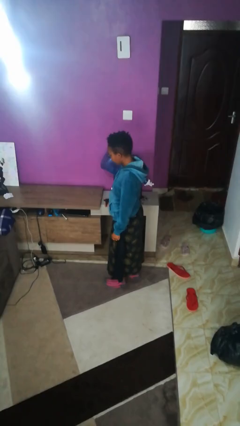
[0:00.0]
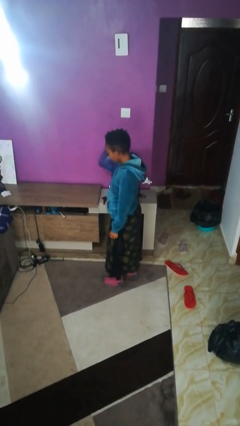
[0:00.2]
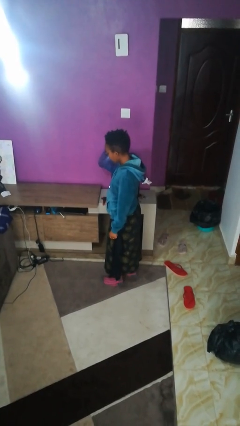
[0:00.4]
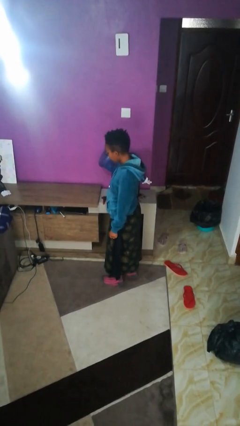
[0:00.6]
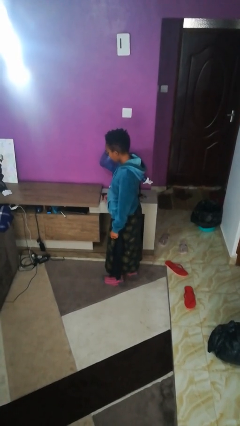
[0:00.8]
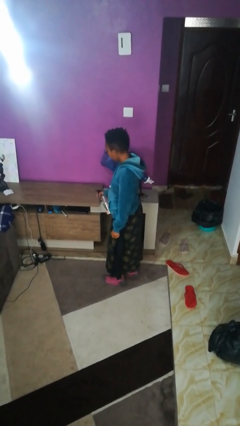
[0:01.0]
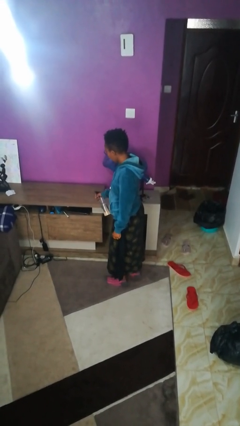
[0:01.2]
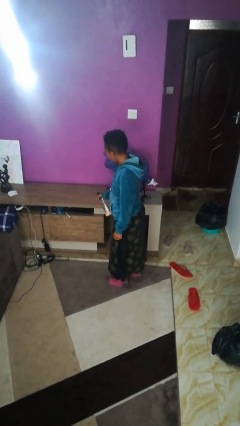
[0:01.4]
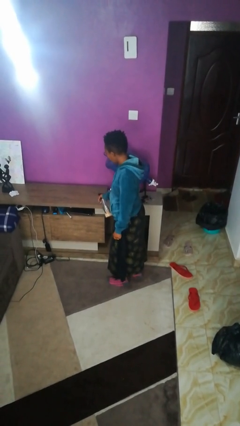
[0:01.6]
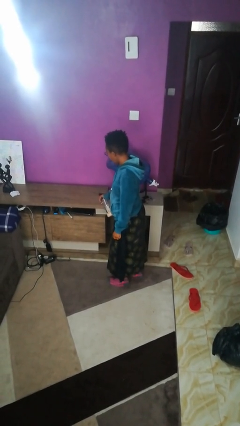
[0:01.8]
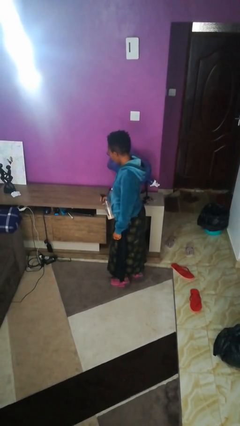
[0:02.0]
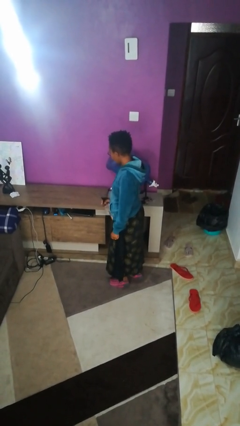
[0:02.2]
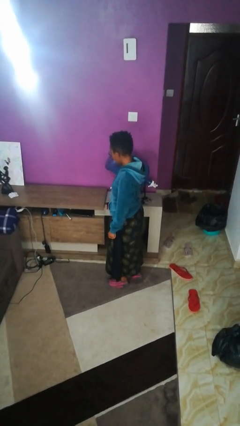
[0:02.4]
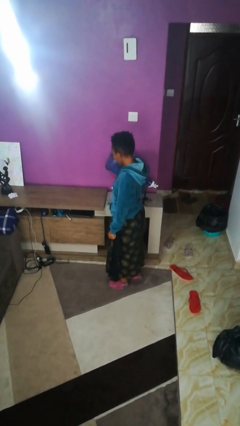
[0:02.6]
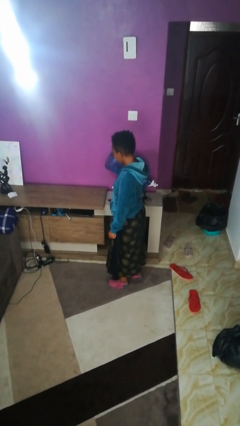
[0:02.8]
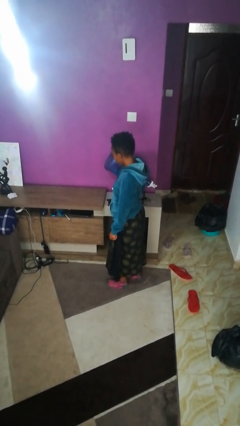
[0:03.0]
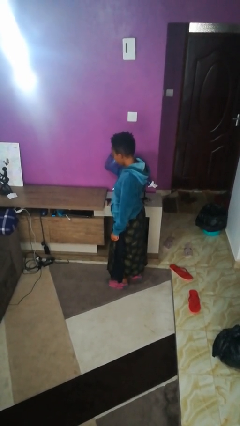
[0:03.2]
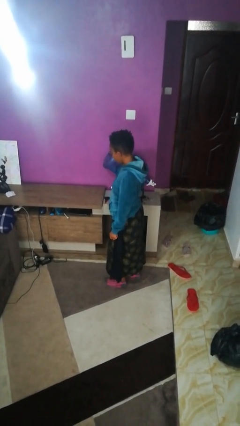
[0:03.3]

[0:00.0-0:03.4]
person sprays from bottle

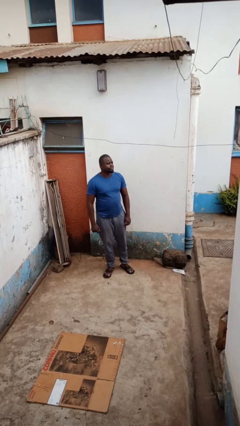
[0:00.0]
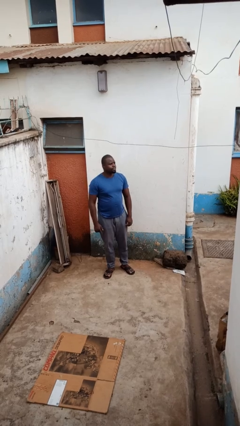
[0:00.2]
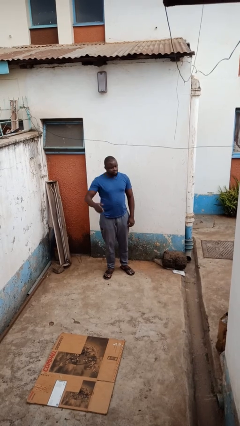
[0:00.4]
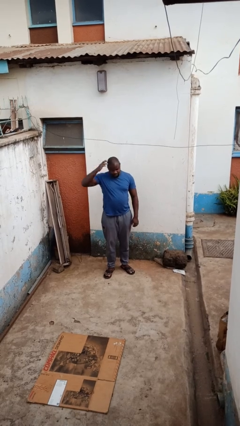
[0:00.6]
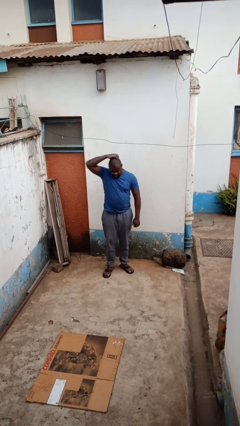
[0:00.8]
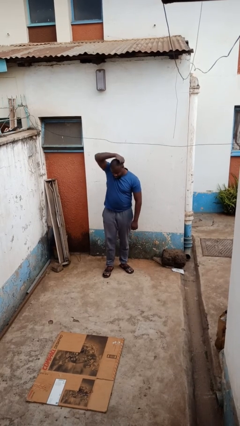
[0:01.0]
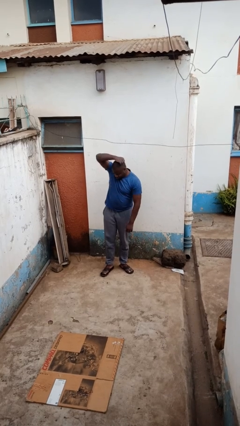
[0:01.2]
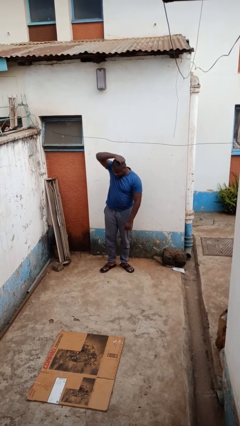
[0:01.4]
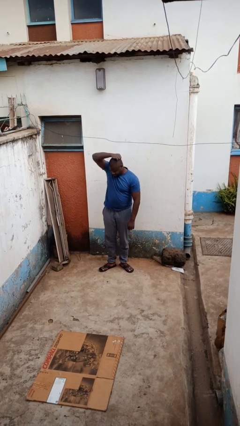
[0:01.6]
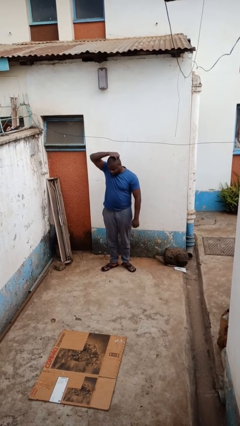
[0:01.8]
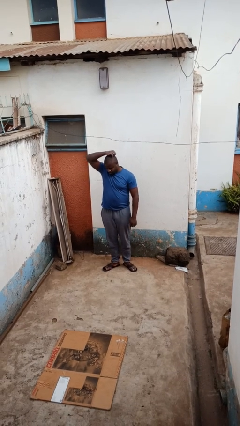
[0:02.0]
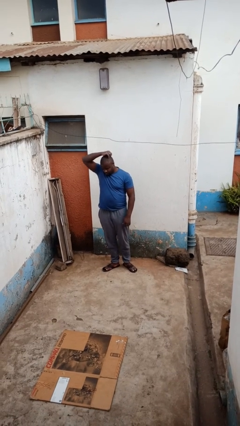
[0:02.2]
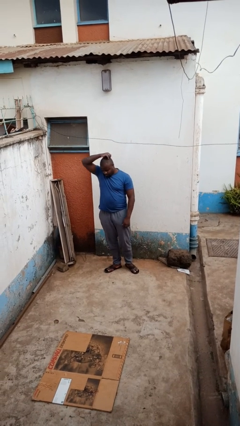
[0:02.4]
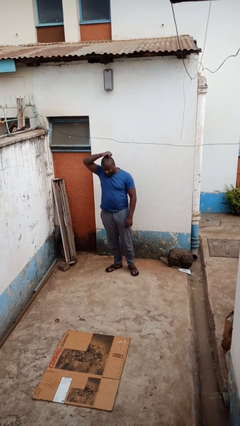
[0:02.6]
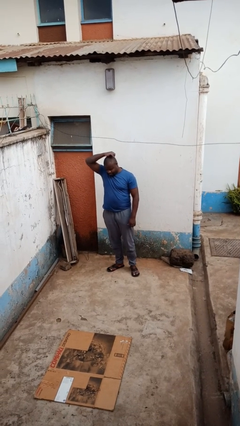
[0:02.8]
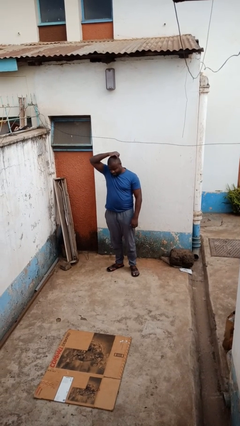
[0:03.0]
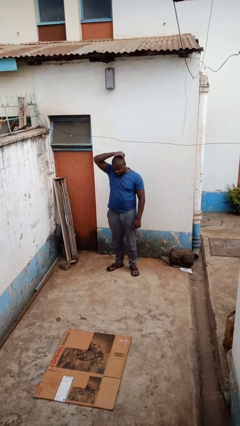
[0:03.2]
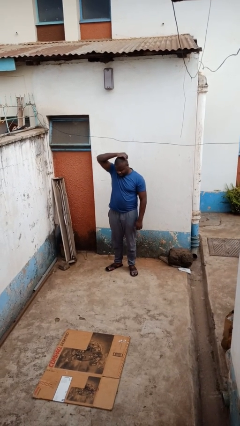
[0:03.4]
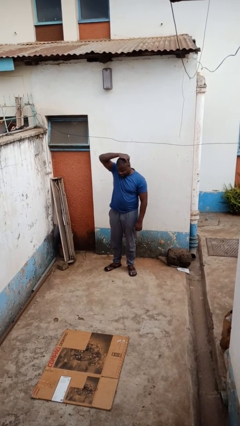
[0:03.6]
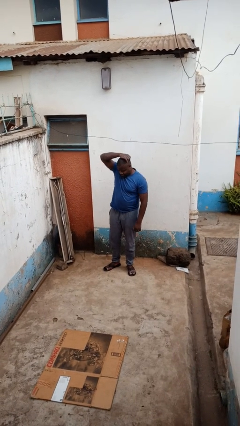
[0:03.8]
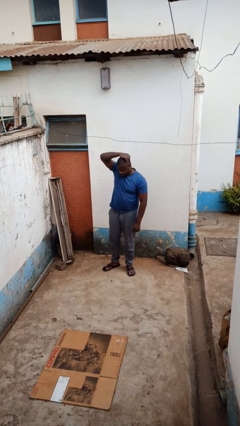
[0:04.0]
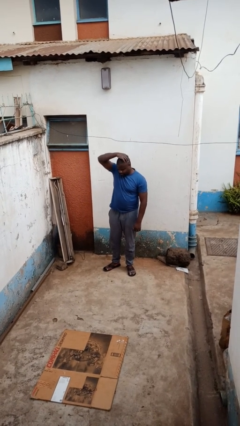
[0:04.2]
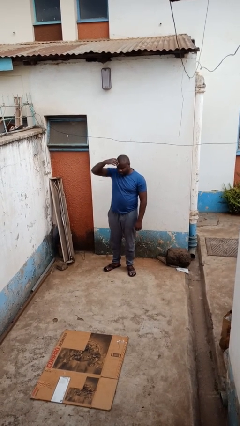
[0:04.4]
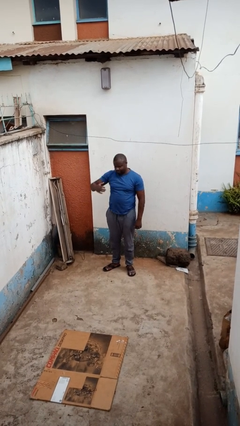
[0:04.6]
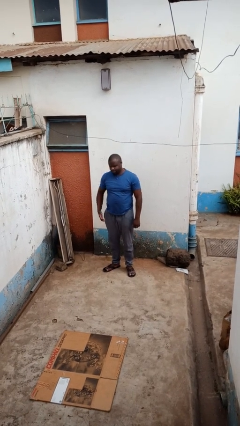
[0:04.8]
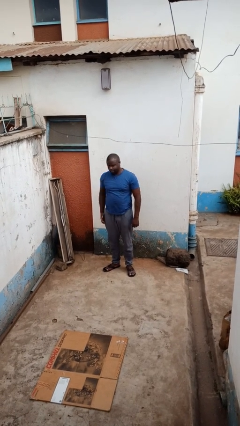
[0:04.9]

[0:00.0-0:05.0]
person scratches face

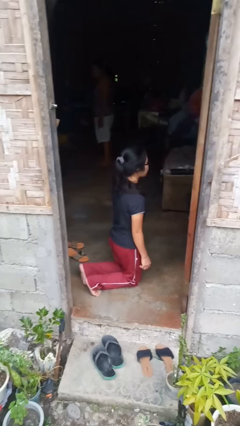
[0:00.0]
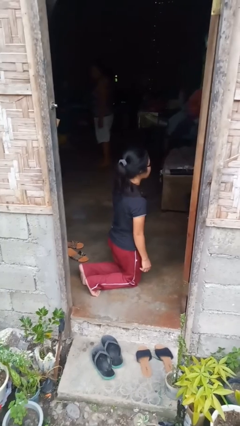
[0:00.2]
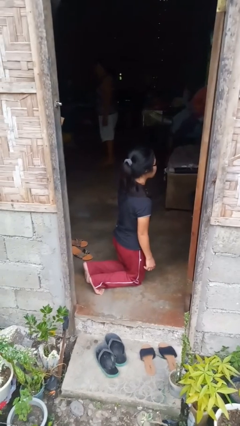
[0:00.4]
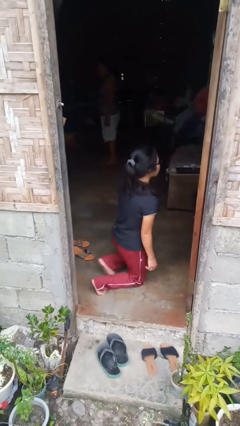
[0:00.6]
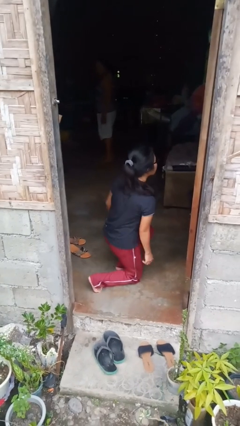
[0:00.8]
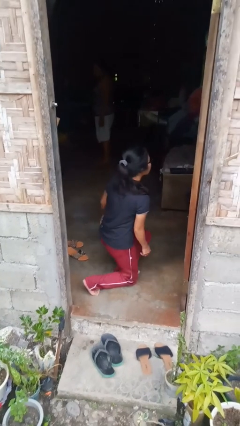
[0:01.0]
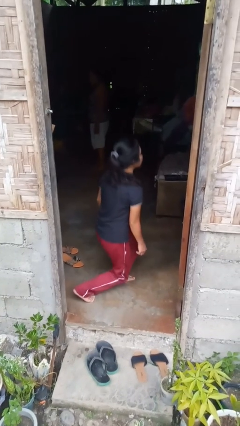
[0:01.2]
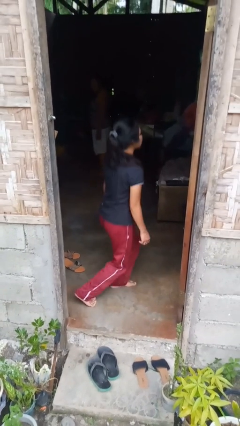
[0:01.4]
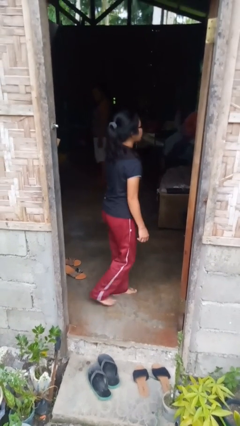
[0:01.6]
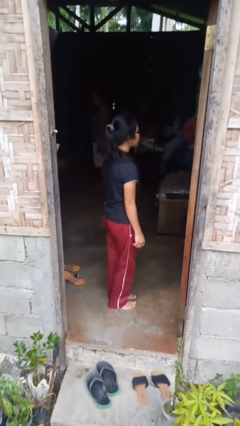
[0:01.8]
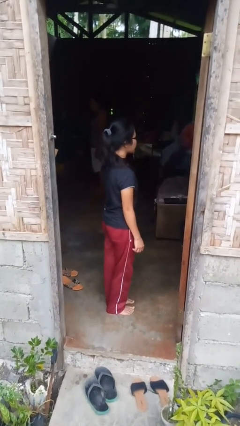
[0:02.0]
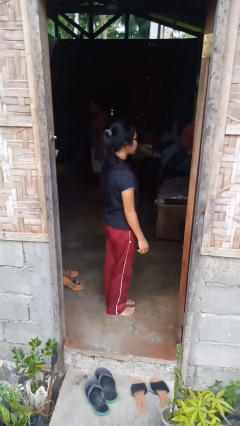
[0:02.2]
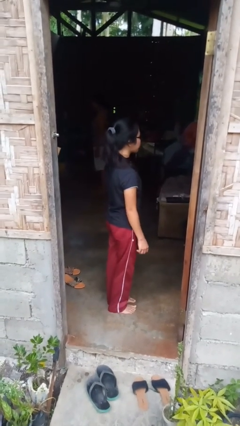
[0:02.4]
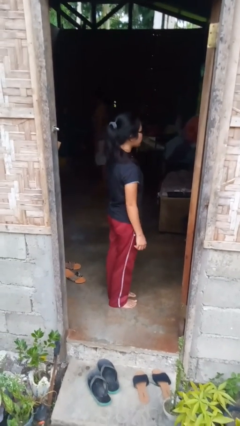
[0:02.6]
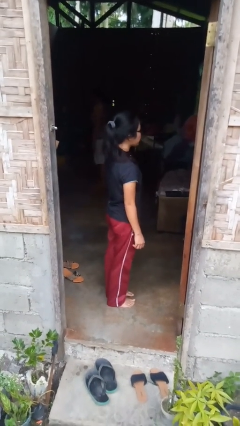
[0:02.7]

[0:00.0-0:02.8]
person stands up from floor

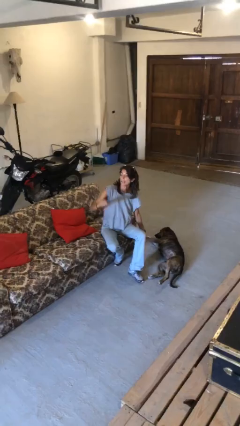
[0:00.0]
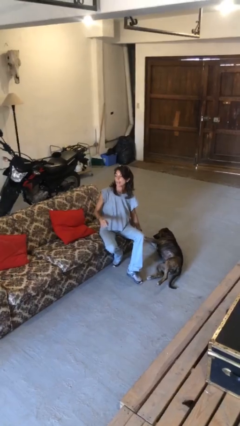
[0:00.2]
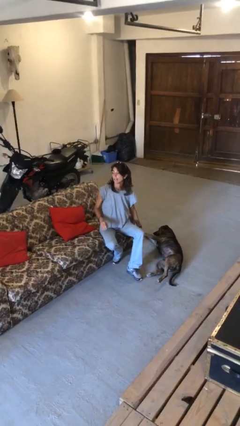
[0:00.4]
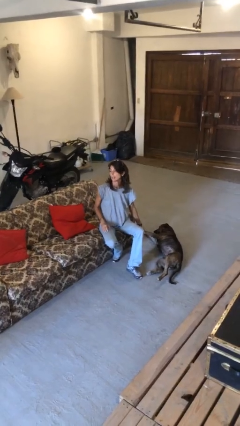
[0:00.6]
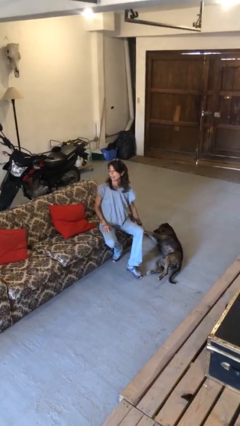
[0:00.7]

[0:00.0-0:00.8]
person gestures lower hand

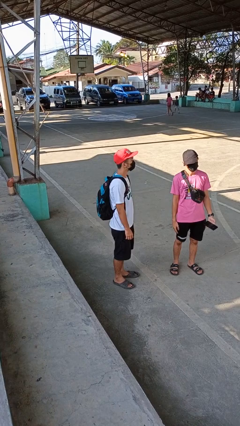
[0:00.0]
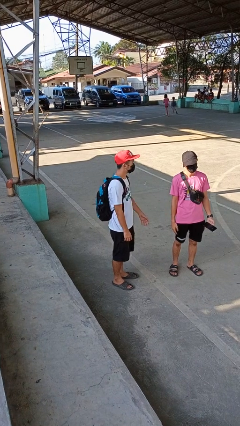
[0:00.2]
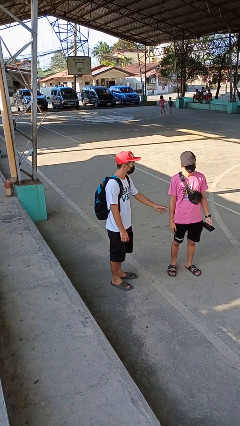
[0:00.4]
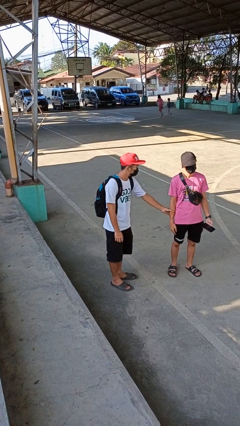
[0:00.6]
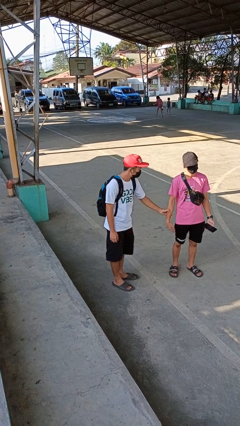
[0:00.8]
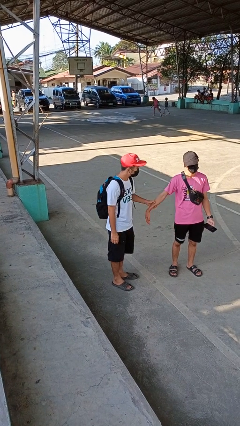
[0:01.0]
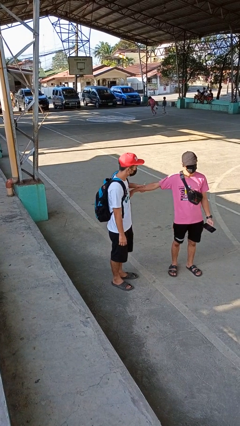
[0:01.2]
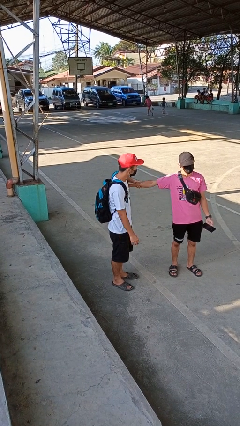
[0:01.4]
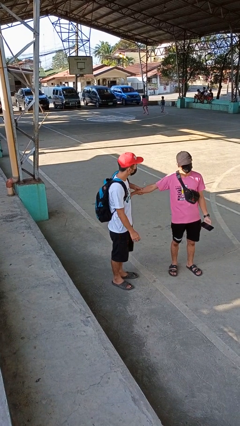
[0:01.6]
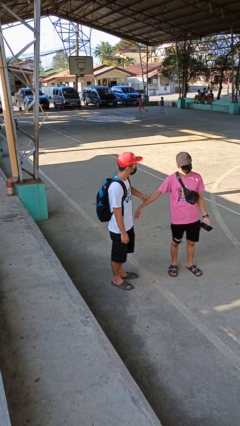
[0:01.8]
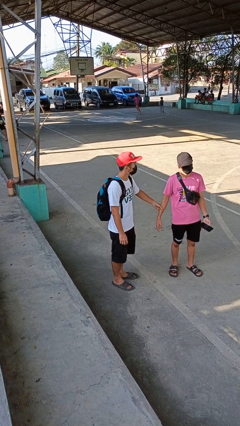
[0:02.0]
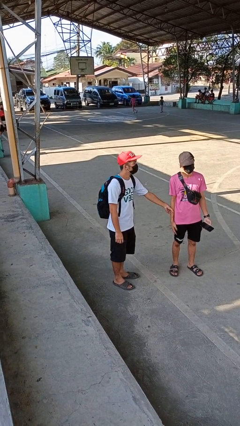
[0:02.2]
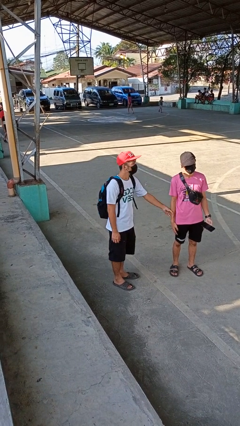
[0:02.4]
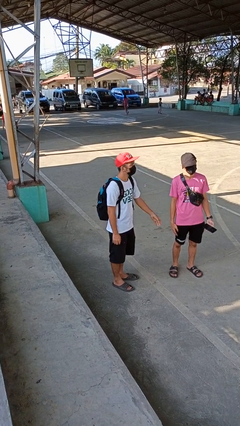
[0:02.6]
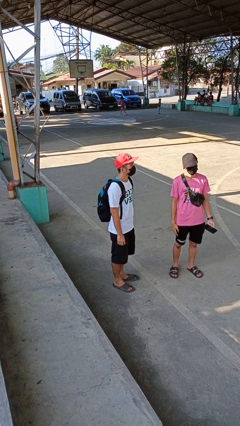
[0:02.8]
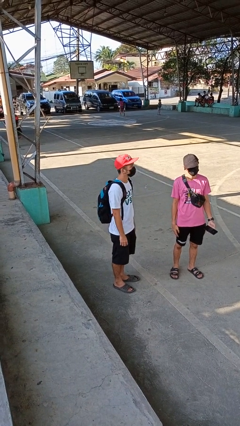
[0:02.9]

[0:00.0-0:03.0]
person grabs person by forearm

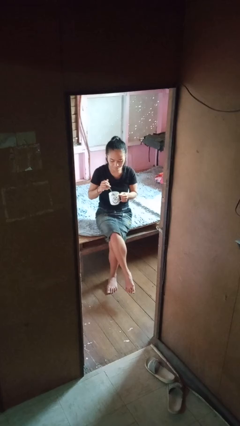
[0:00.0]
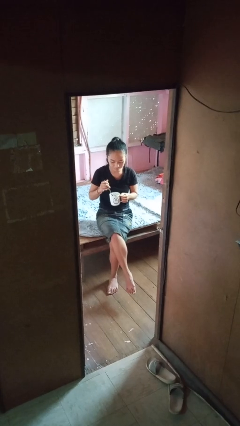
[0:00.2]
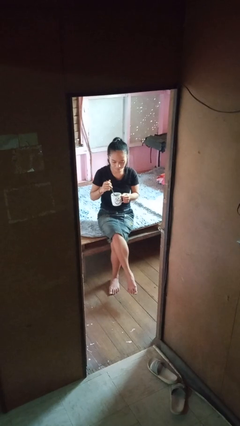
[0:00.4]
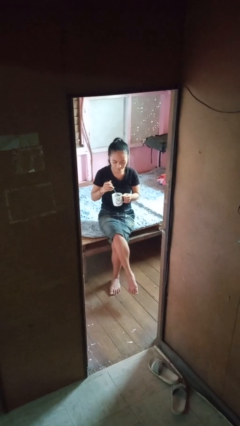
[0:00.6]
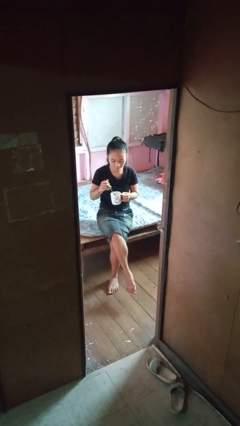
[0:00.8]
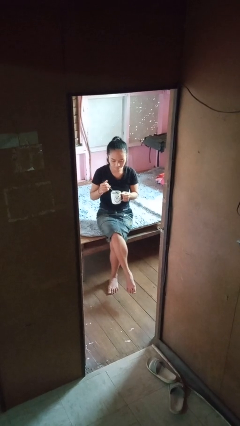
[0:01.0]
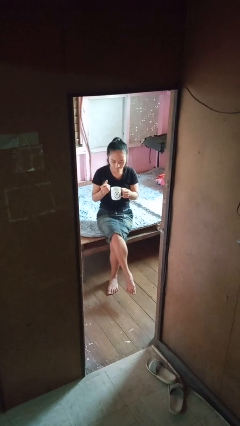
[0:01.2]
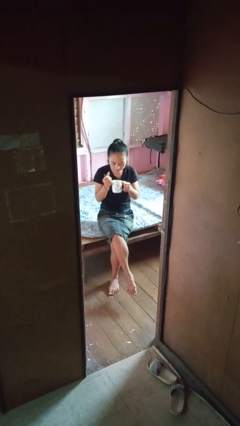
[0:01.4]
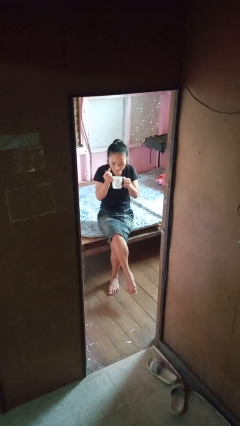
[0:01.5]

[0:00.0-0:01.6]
person stirs mug

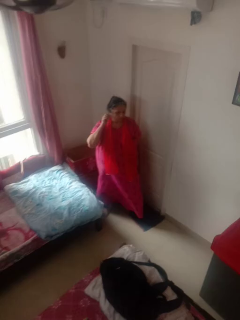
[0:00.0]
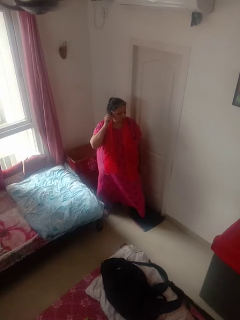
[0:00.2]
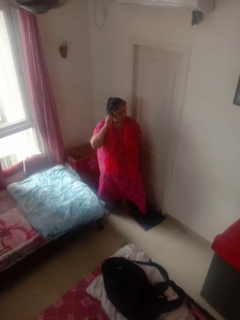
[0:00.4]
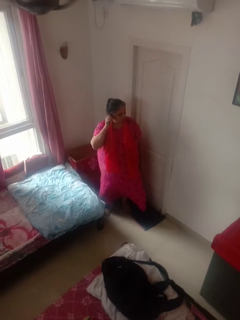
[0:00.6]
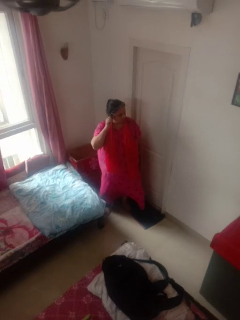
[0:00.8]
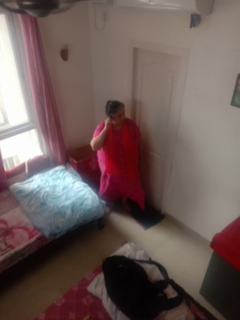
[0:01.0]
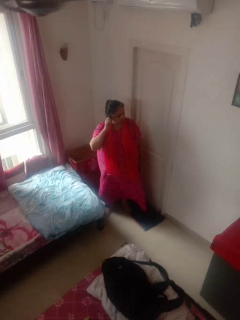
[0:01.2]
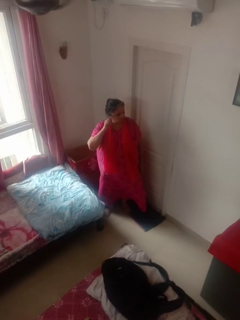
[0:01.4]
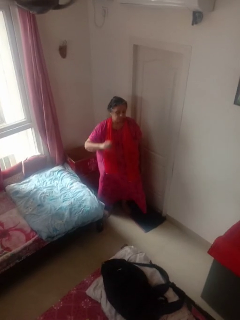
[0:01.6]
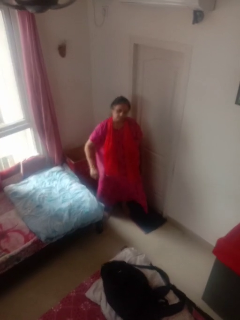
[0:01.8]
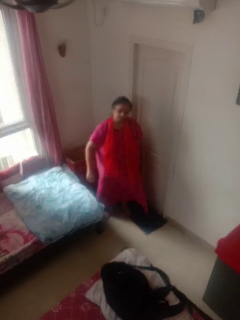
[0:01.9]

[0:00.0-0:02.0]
person touches earlobe
